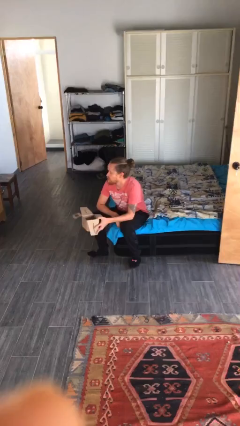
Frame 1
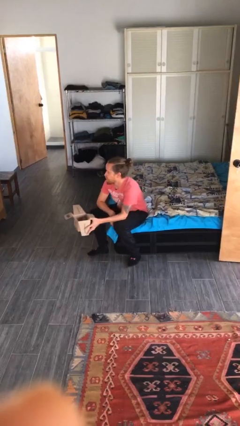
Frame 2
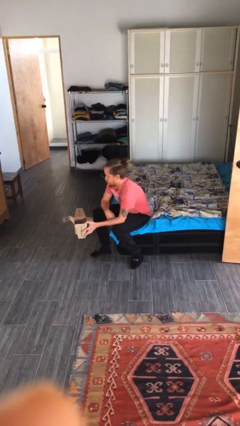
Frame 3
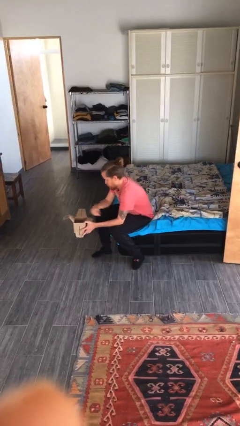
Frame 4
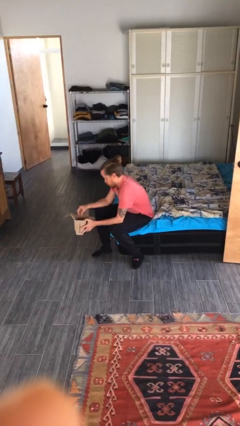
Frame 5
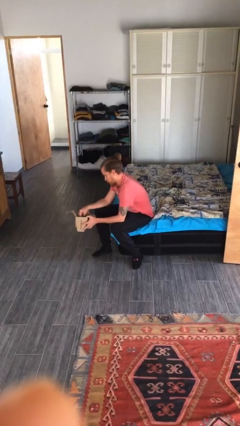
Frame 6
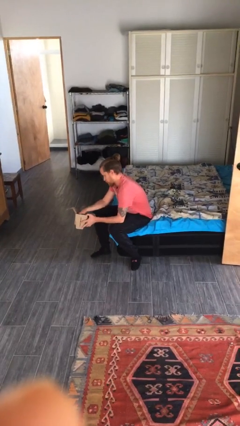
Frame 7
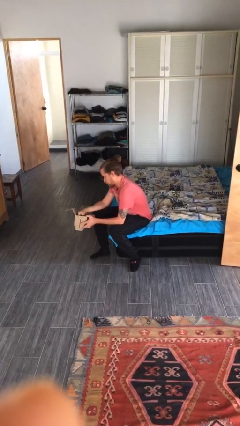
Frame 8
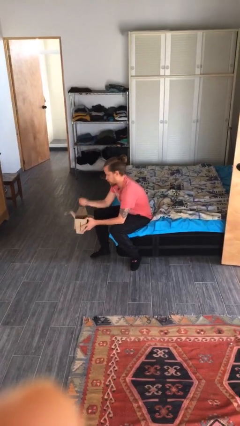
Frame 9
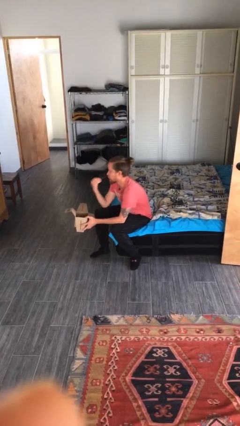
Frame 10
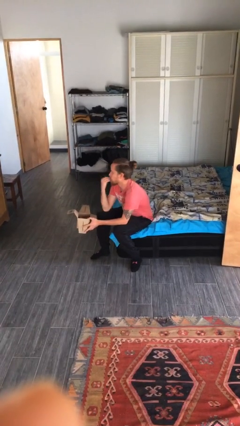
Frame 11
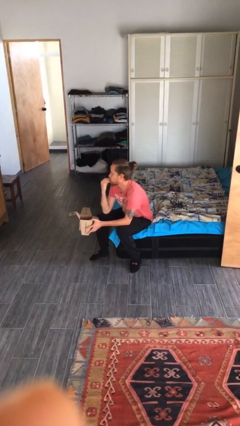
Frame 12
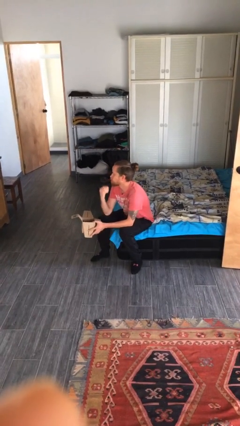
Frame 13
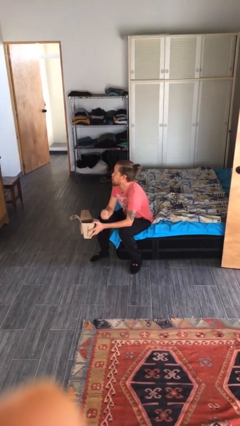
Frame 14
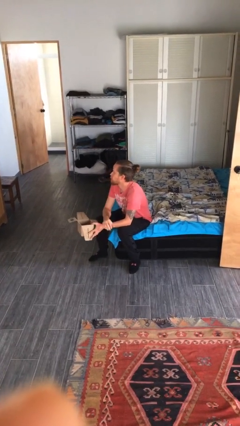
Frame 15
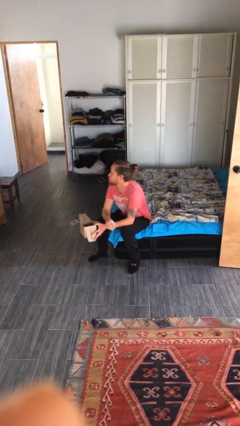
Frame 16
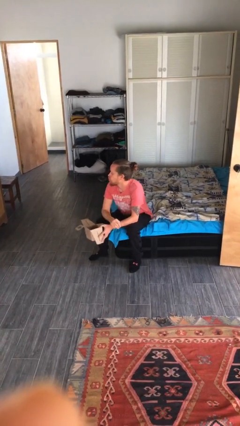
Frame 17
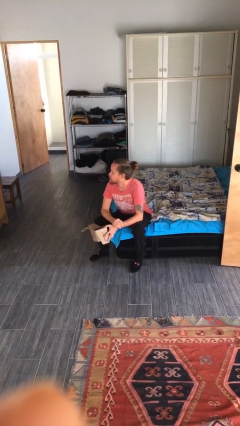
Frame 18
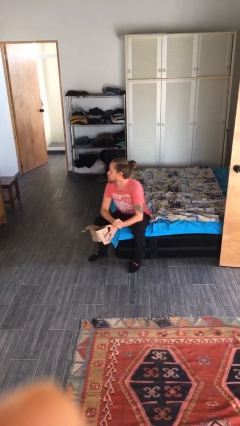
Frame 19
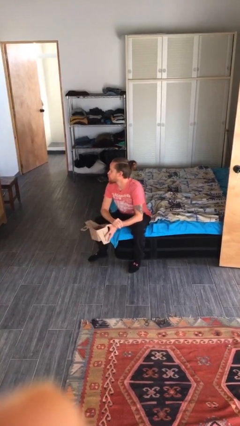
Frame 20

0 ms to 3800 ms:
person eats snack from bag

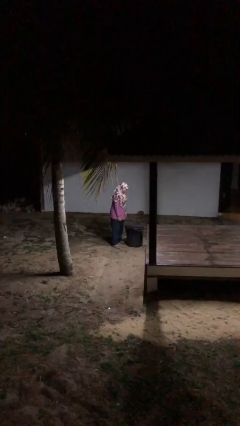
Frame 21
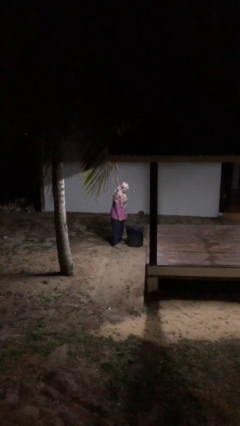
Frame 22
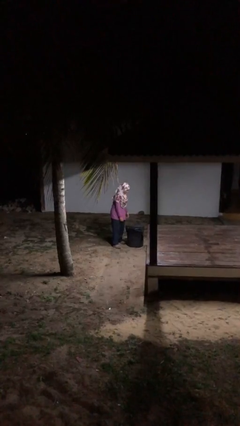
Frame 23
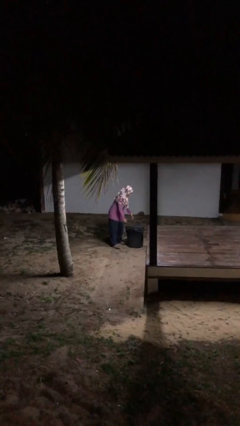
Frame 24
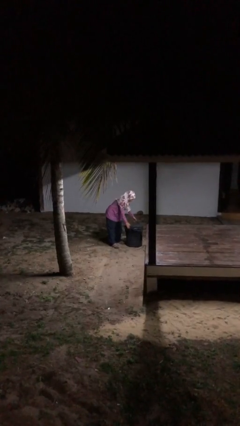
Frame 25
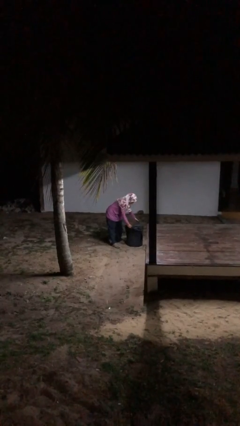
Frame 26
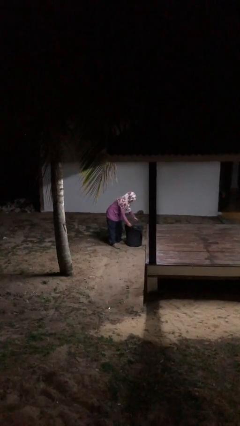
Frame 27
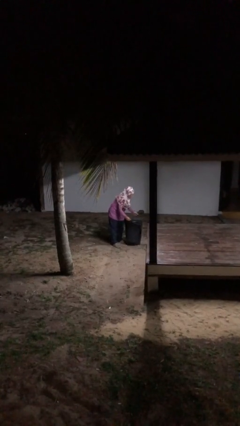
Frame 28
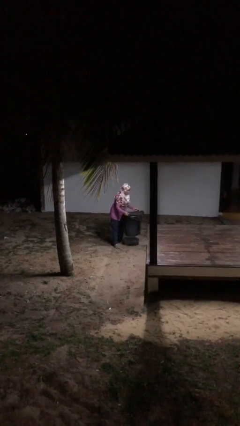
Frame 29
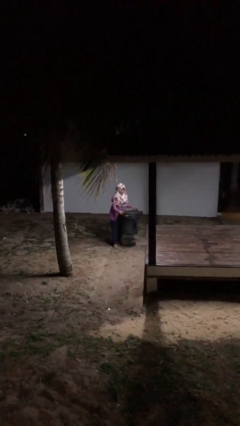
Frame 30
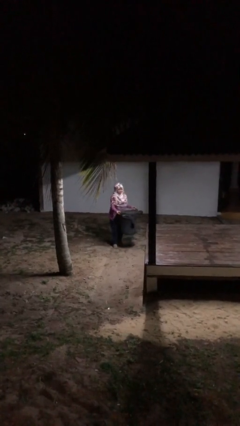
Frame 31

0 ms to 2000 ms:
person picks up object from floor

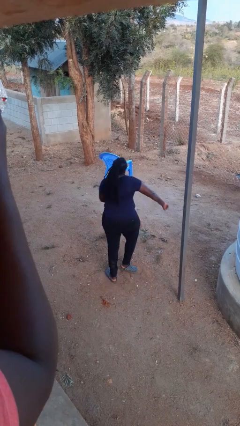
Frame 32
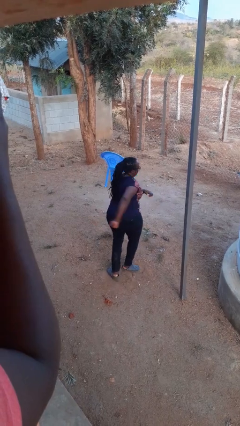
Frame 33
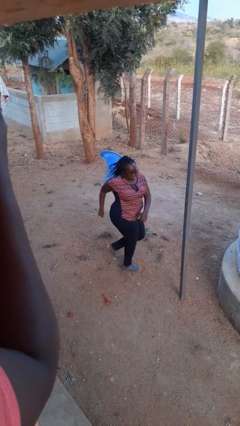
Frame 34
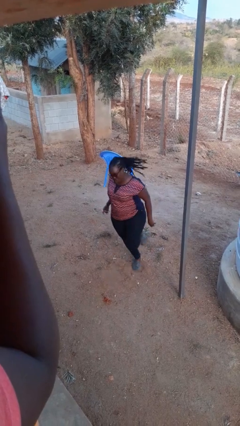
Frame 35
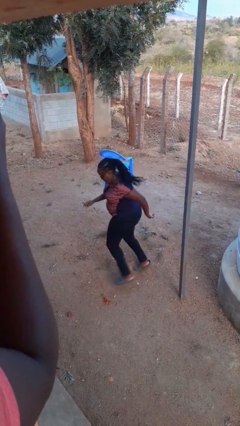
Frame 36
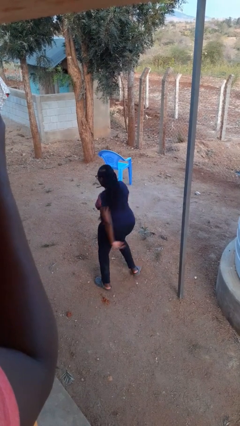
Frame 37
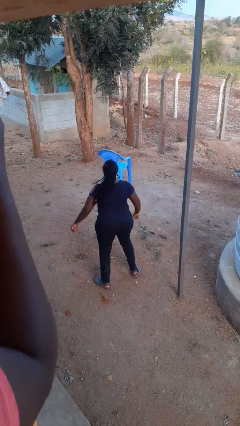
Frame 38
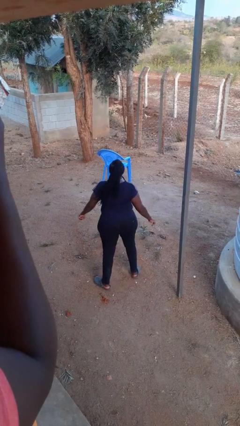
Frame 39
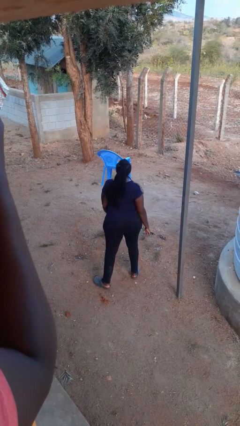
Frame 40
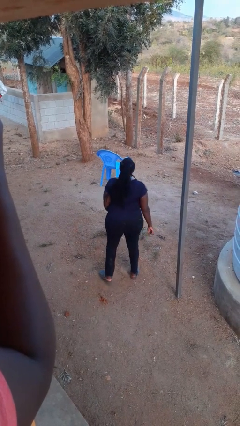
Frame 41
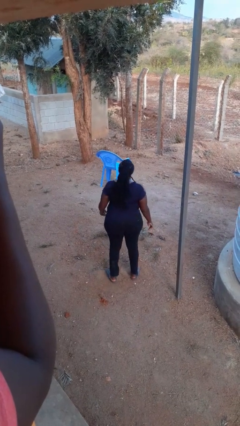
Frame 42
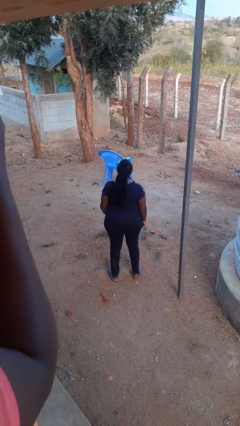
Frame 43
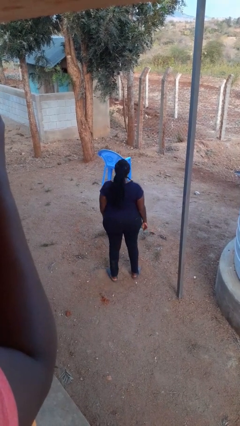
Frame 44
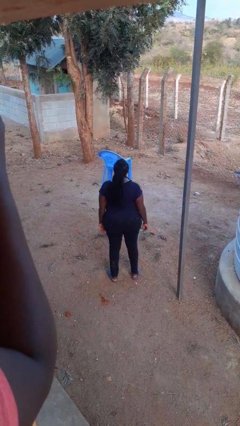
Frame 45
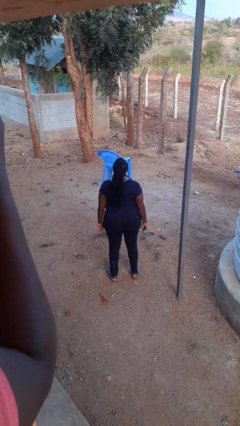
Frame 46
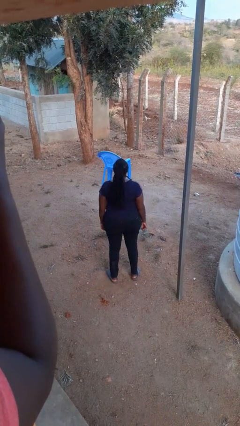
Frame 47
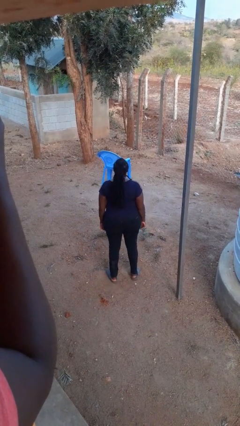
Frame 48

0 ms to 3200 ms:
person twirls

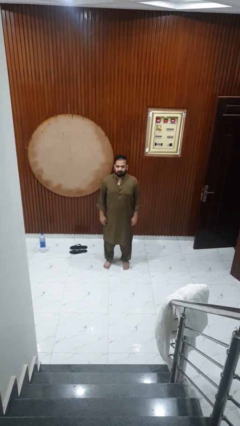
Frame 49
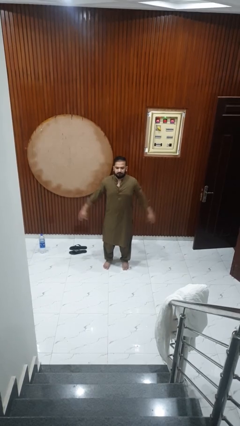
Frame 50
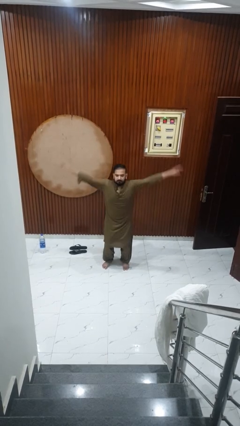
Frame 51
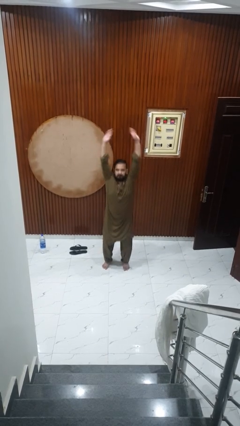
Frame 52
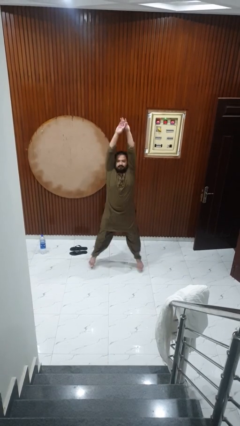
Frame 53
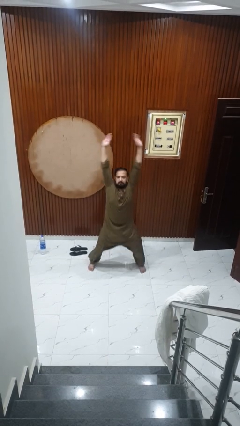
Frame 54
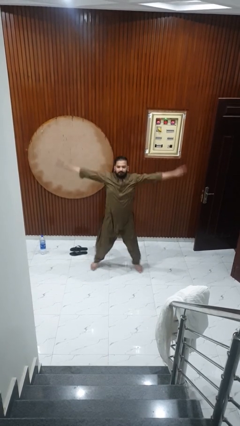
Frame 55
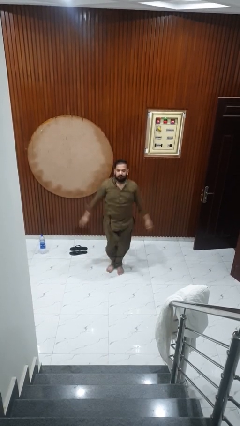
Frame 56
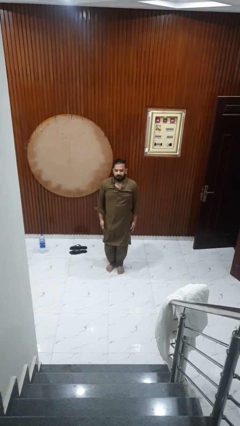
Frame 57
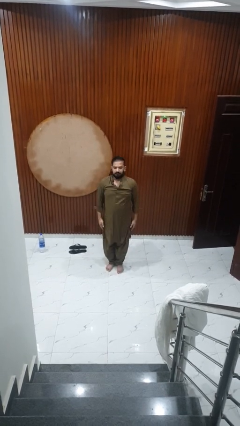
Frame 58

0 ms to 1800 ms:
person exercises with jumping jacks

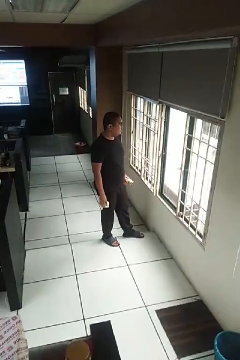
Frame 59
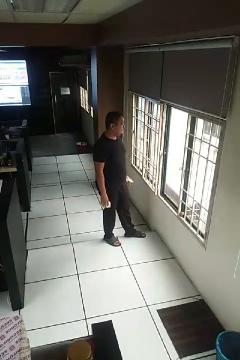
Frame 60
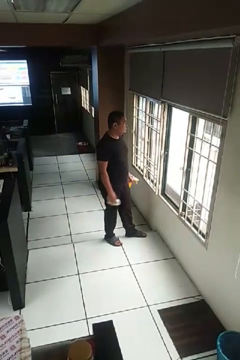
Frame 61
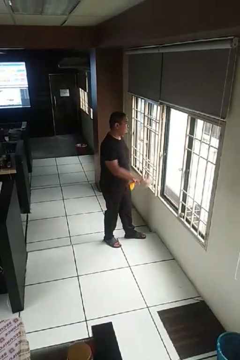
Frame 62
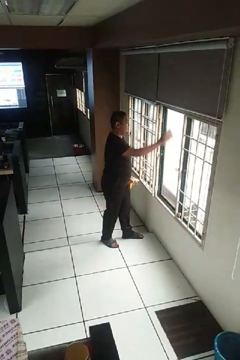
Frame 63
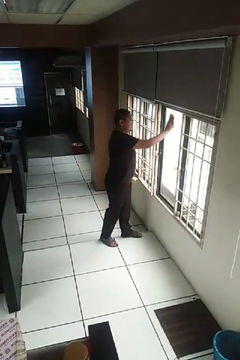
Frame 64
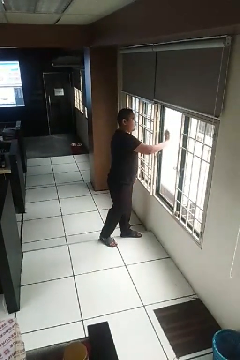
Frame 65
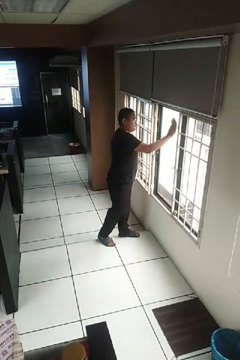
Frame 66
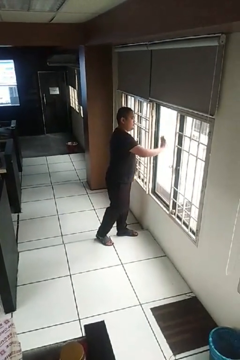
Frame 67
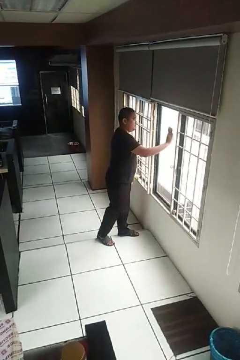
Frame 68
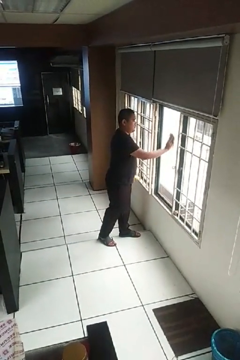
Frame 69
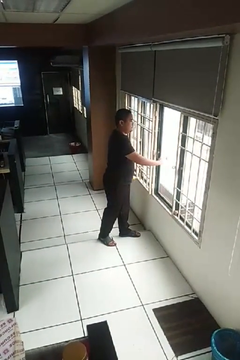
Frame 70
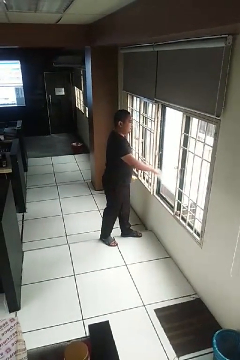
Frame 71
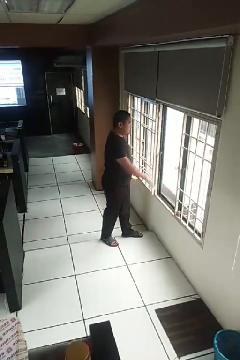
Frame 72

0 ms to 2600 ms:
person washes window

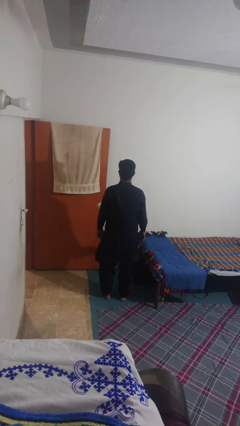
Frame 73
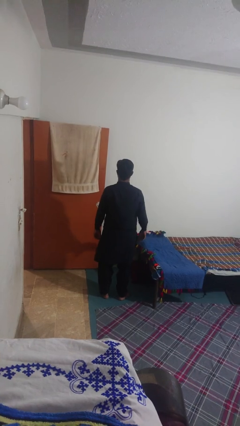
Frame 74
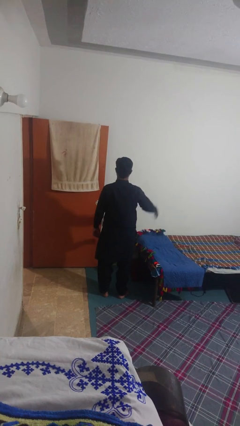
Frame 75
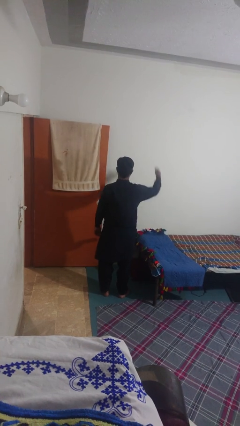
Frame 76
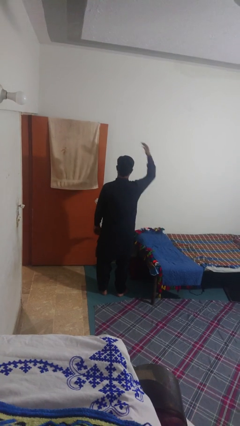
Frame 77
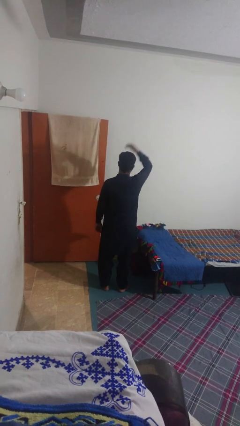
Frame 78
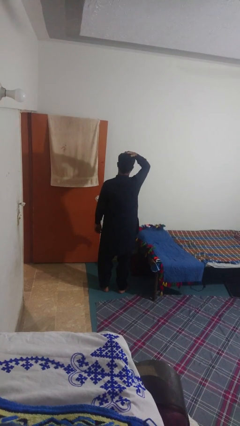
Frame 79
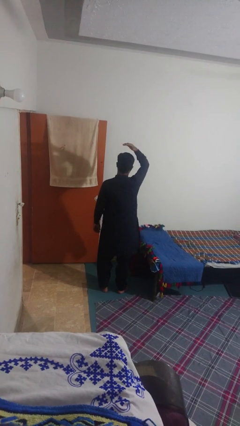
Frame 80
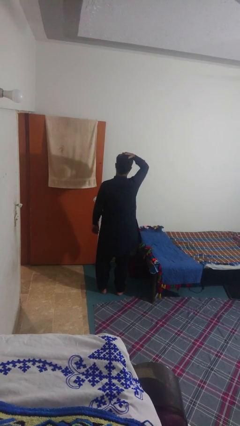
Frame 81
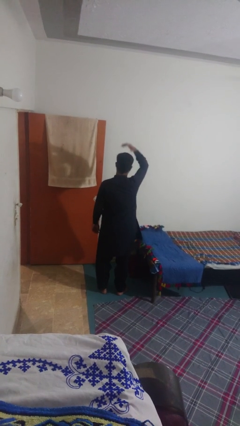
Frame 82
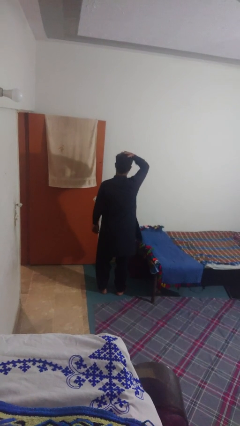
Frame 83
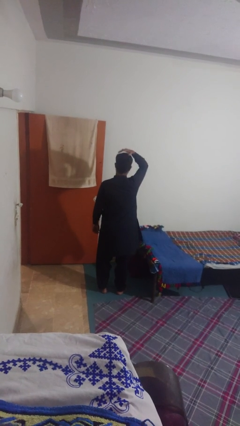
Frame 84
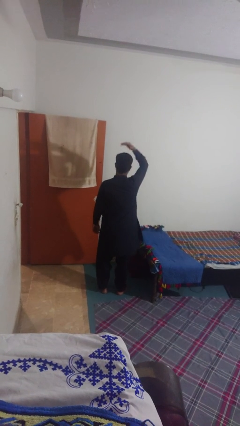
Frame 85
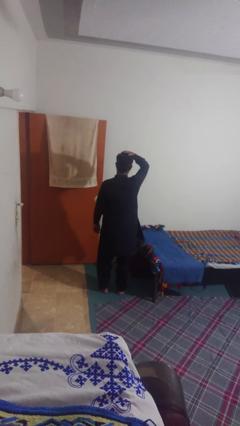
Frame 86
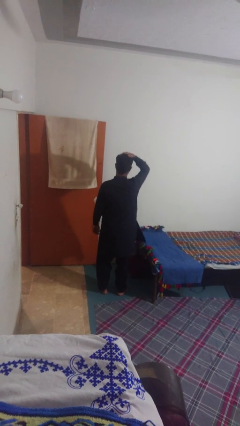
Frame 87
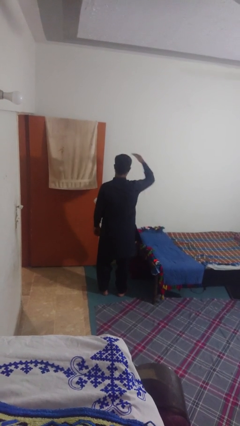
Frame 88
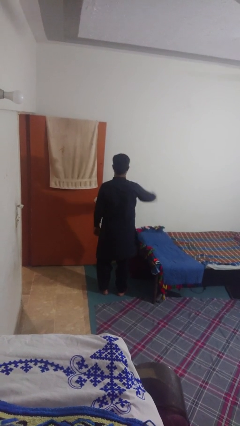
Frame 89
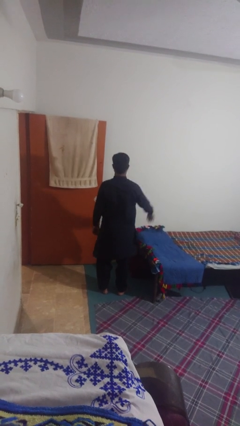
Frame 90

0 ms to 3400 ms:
person pats head

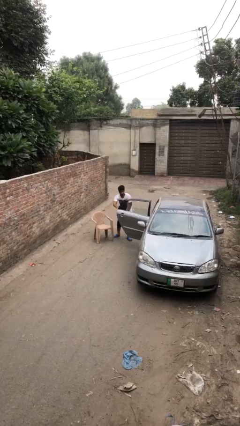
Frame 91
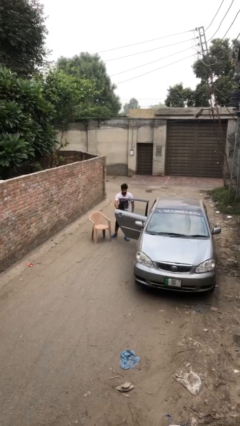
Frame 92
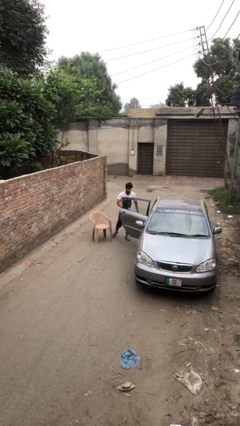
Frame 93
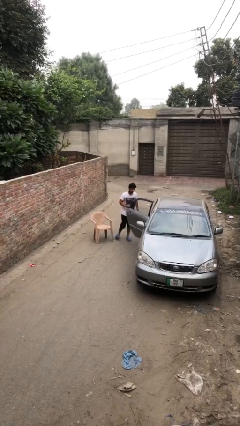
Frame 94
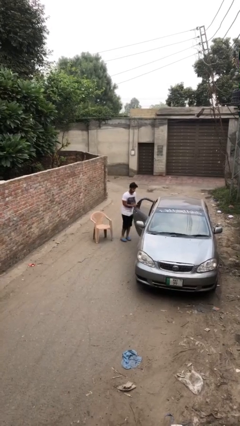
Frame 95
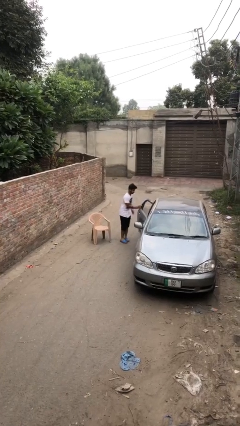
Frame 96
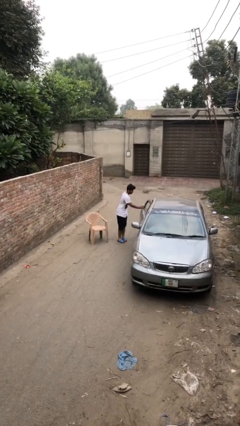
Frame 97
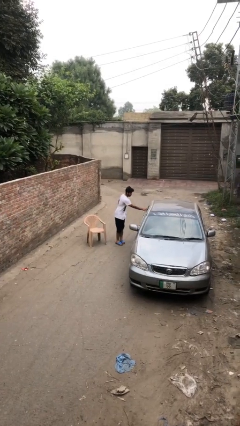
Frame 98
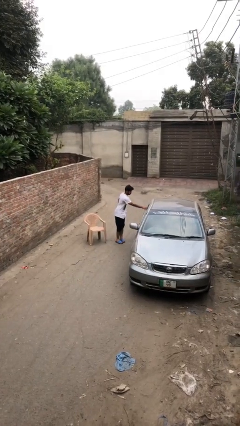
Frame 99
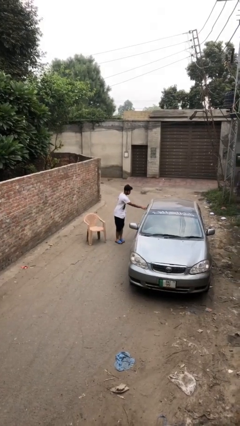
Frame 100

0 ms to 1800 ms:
person closes car door
